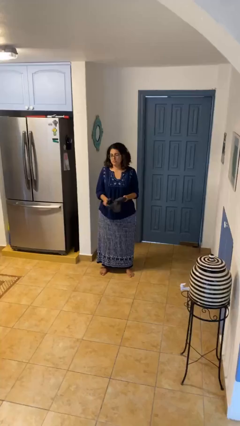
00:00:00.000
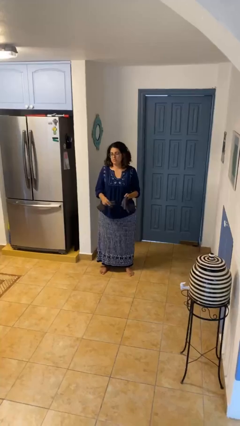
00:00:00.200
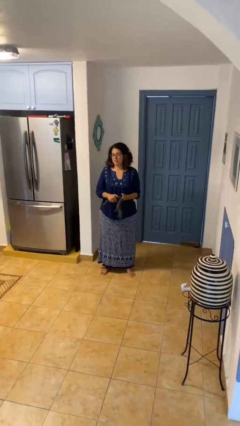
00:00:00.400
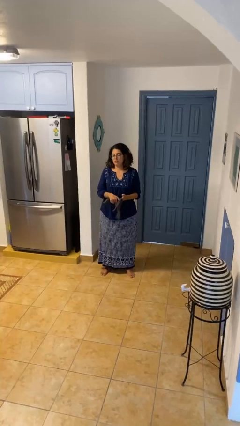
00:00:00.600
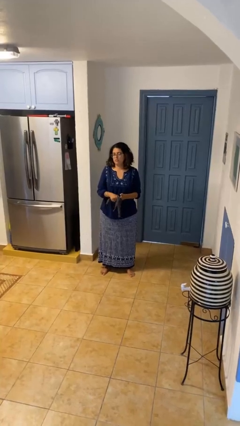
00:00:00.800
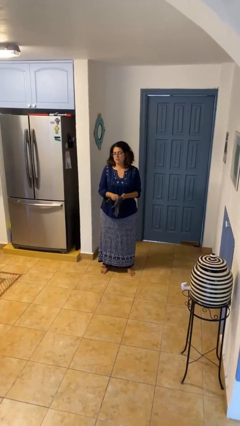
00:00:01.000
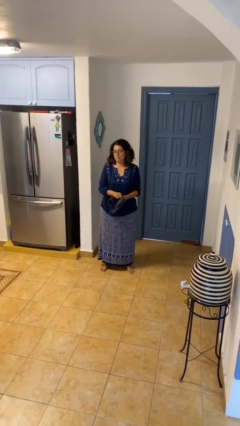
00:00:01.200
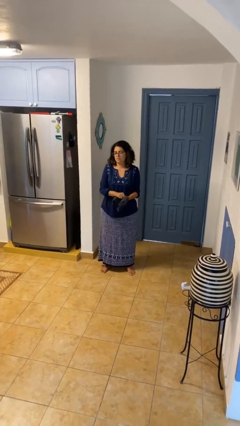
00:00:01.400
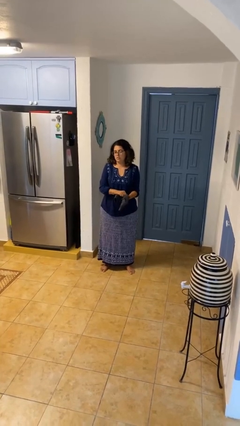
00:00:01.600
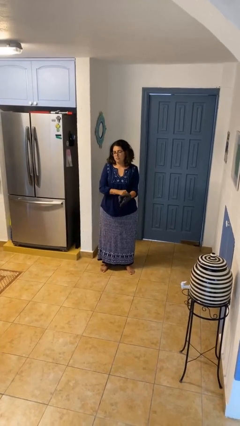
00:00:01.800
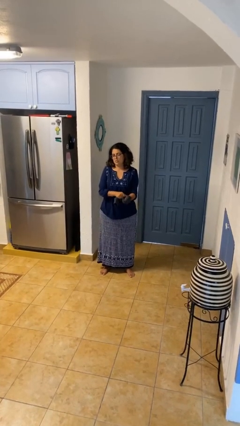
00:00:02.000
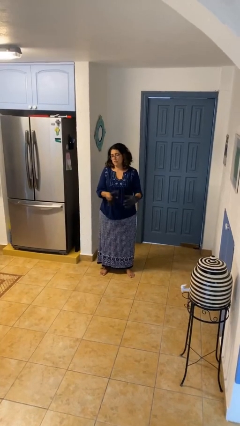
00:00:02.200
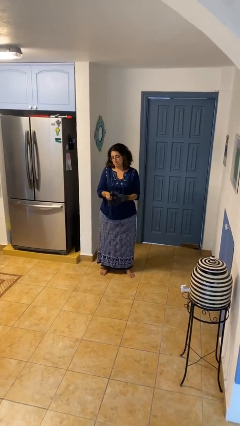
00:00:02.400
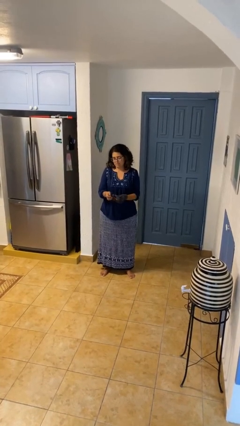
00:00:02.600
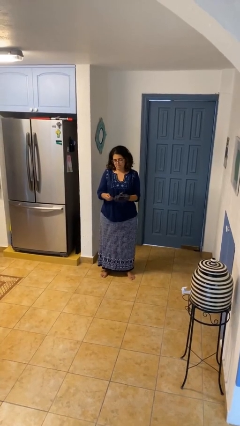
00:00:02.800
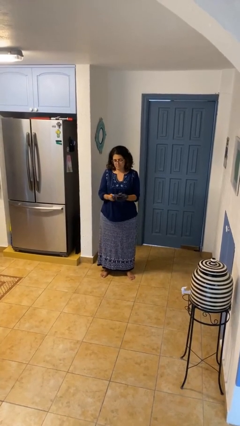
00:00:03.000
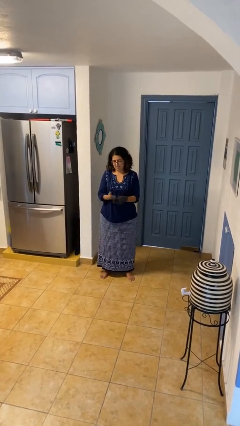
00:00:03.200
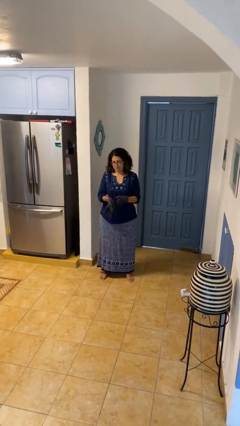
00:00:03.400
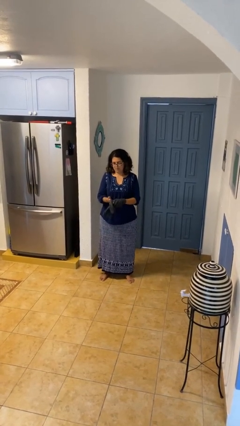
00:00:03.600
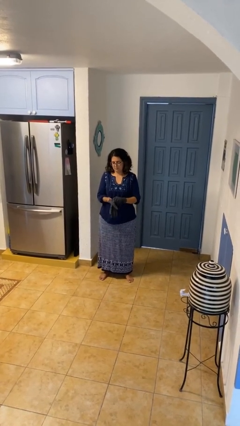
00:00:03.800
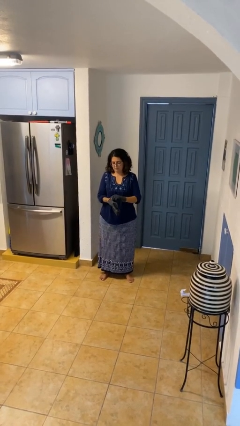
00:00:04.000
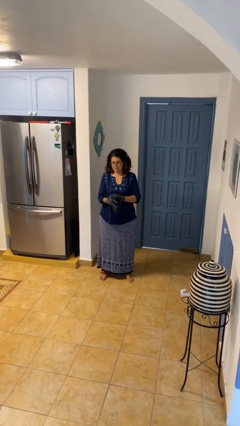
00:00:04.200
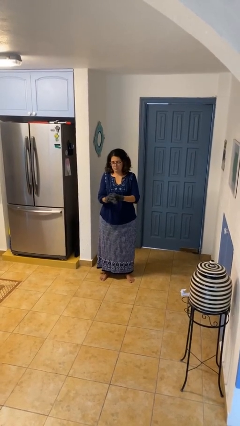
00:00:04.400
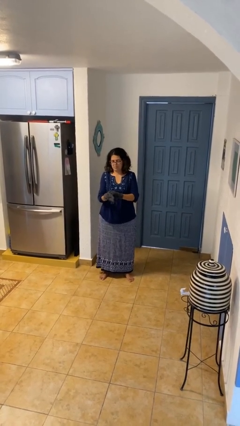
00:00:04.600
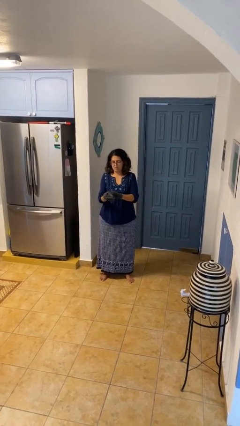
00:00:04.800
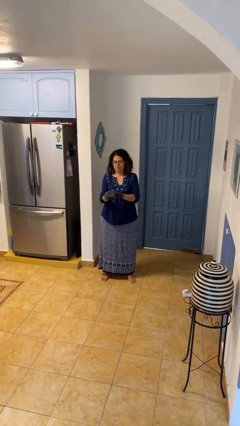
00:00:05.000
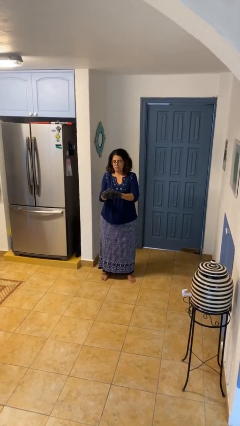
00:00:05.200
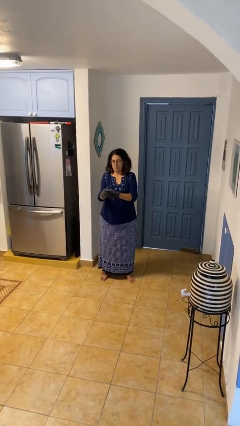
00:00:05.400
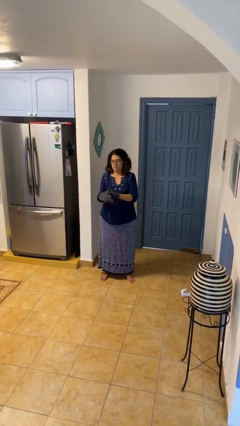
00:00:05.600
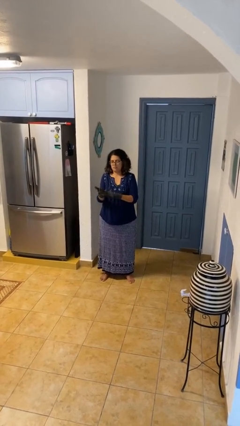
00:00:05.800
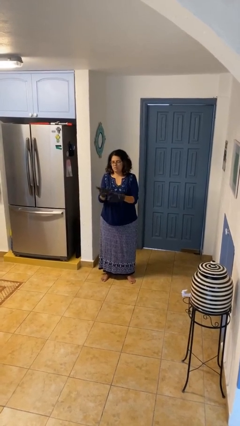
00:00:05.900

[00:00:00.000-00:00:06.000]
person puts on gloves

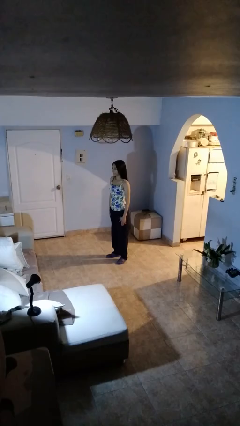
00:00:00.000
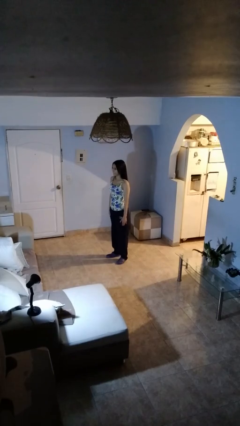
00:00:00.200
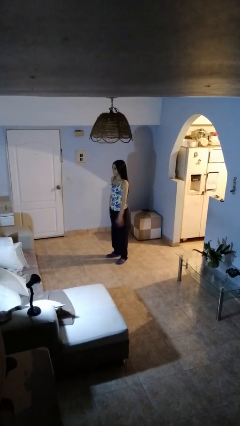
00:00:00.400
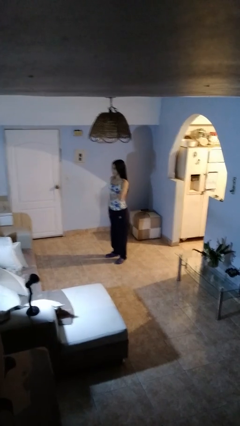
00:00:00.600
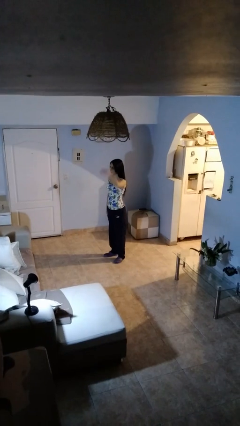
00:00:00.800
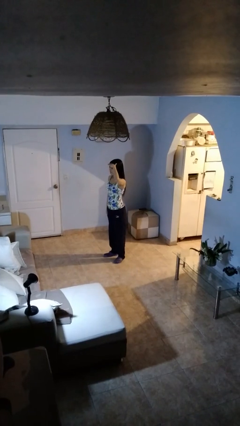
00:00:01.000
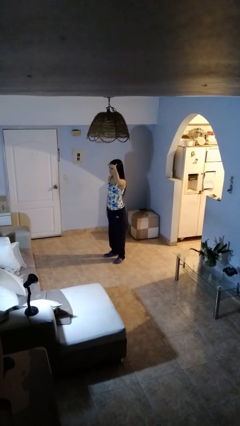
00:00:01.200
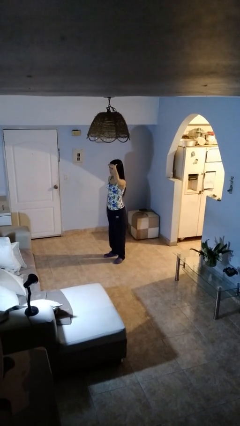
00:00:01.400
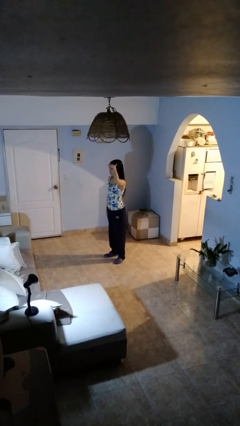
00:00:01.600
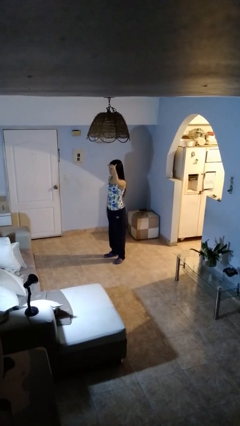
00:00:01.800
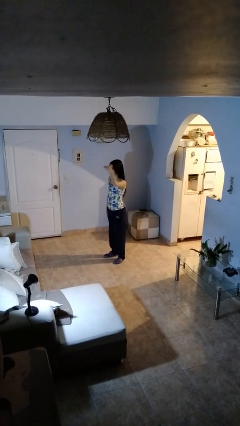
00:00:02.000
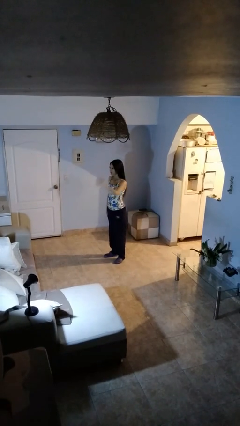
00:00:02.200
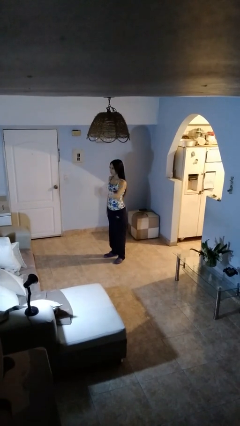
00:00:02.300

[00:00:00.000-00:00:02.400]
person salutes

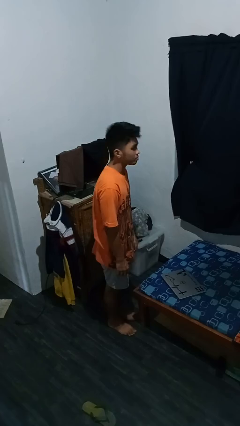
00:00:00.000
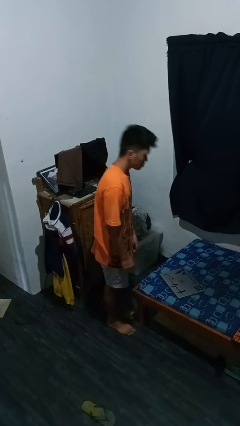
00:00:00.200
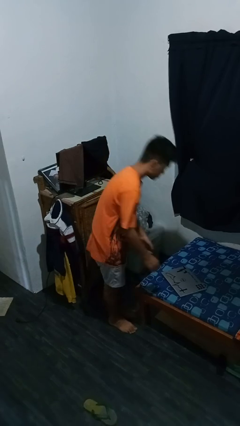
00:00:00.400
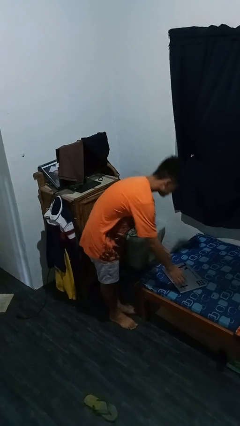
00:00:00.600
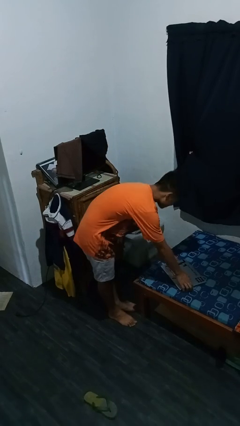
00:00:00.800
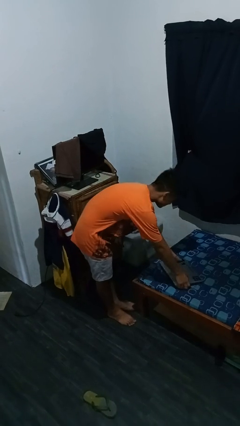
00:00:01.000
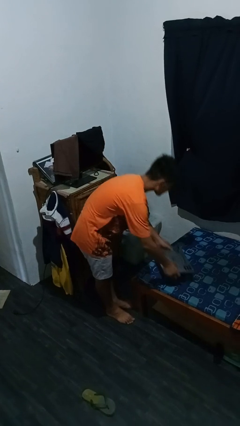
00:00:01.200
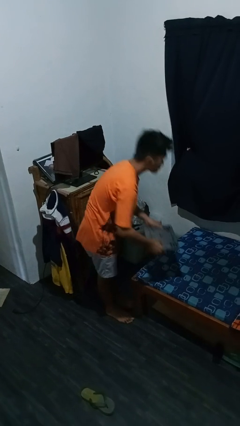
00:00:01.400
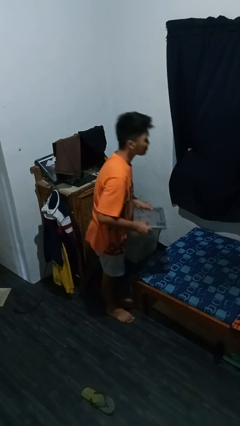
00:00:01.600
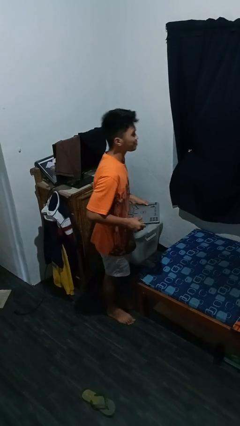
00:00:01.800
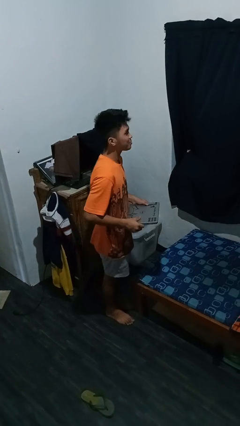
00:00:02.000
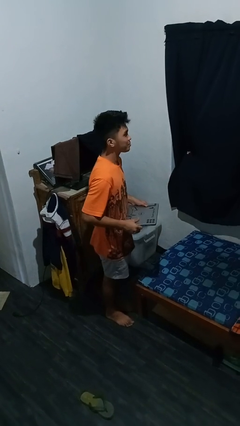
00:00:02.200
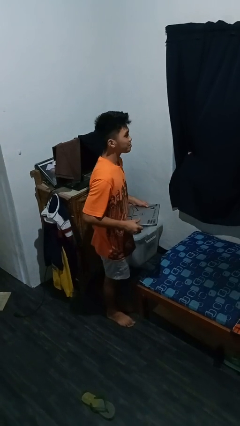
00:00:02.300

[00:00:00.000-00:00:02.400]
person picks up object from bed

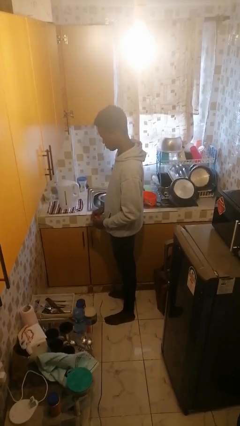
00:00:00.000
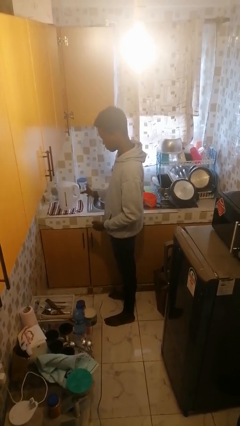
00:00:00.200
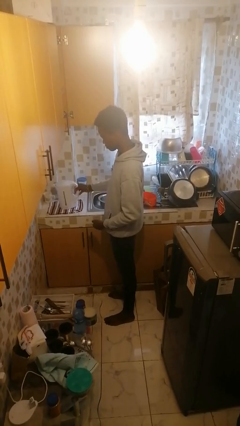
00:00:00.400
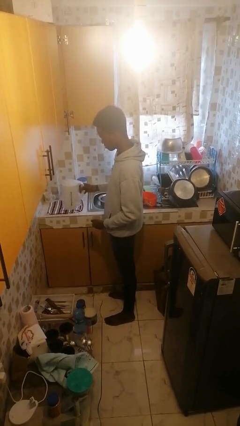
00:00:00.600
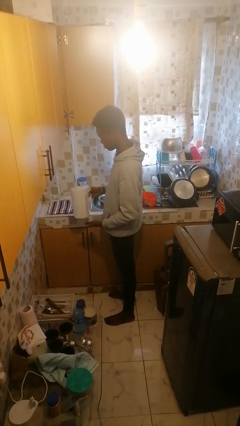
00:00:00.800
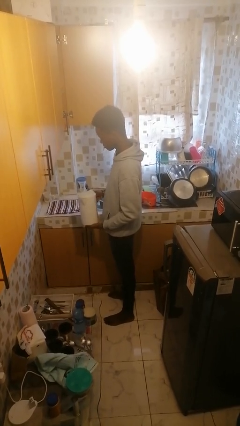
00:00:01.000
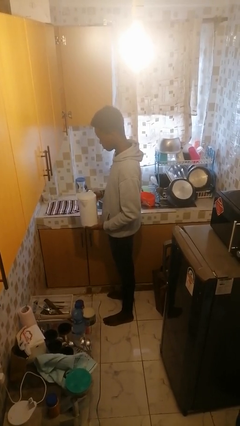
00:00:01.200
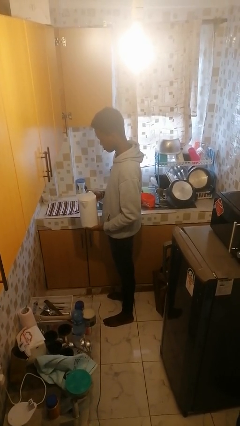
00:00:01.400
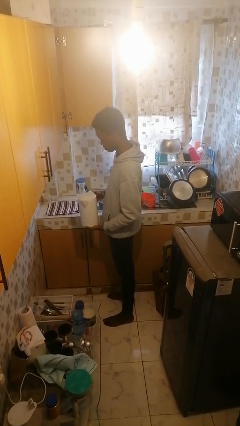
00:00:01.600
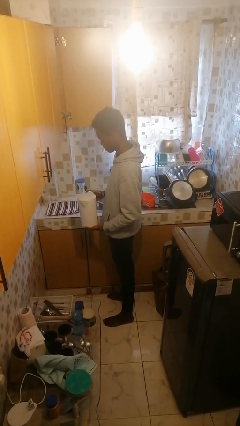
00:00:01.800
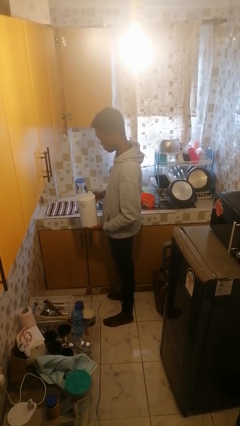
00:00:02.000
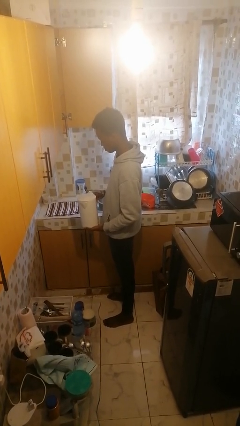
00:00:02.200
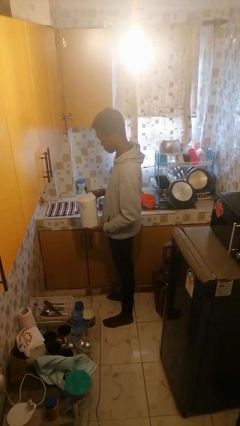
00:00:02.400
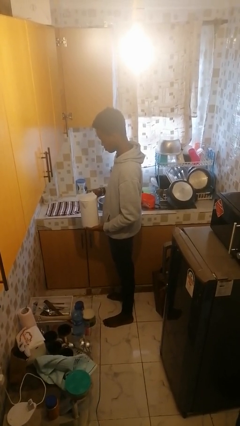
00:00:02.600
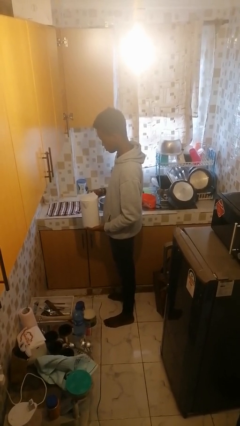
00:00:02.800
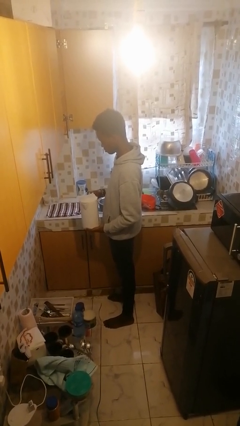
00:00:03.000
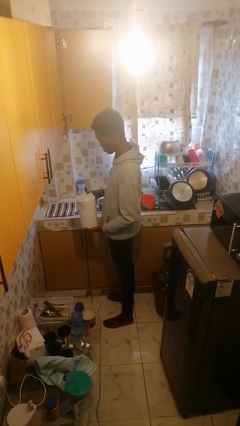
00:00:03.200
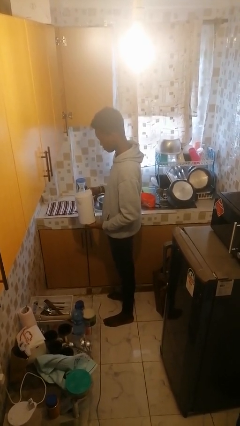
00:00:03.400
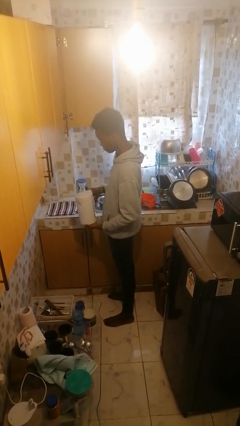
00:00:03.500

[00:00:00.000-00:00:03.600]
person picks up object from countertop

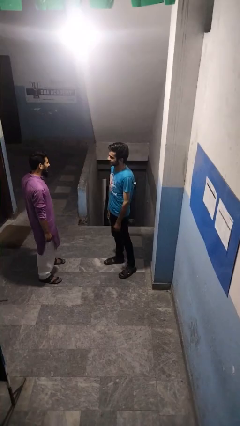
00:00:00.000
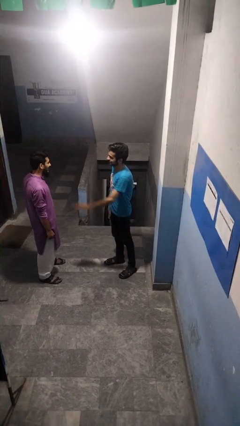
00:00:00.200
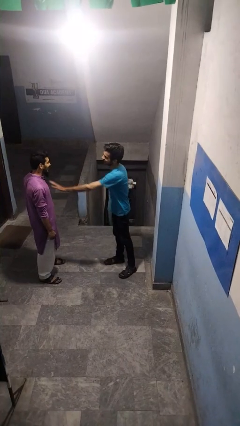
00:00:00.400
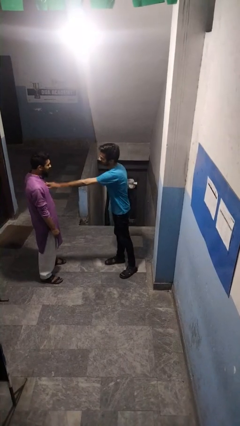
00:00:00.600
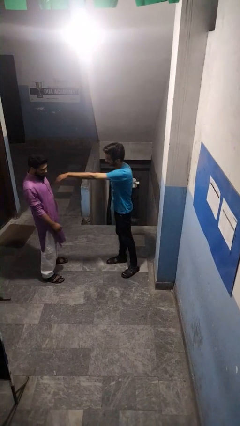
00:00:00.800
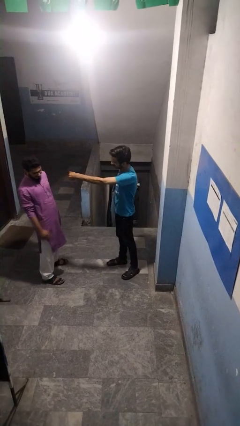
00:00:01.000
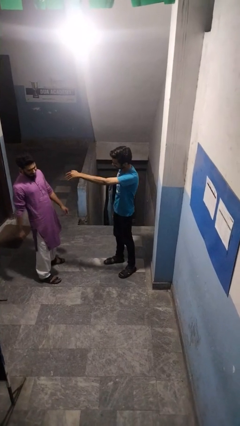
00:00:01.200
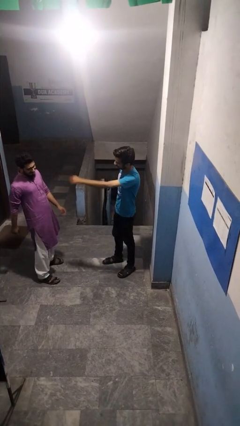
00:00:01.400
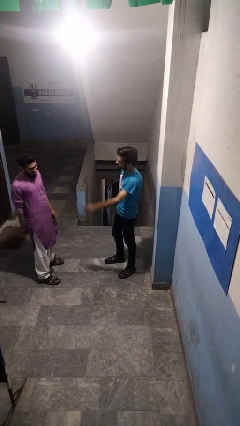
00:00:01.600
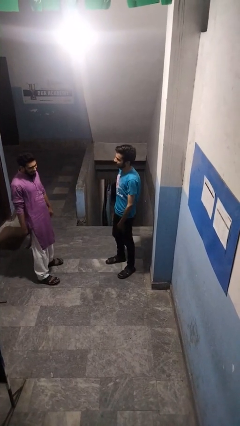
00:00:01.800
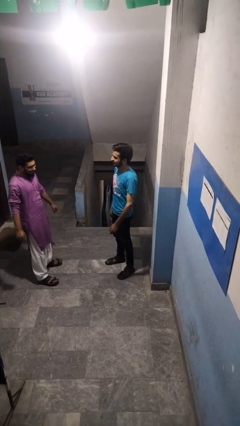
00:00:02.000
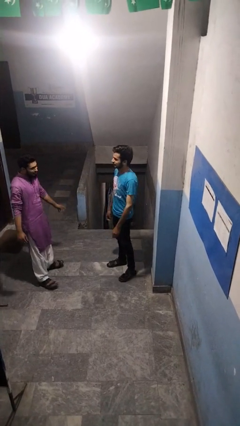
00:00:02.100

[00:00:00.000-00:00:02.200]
person shoves person

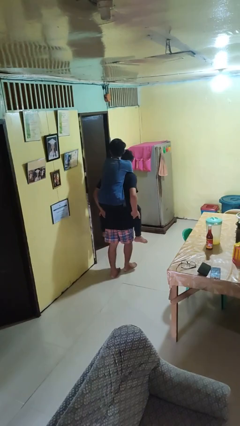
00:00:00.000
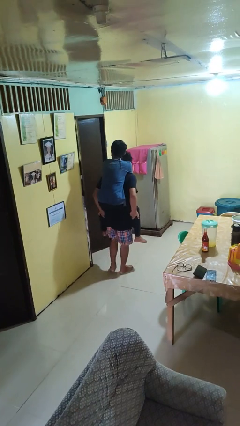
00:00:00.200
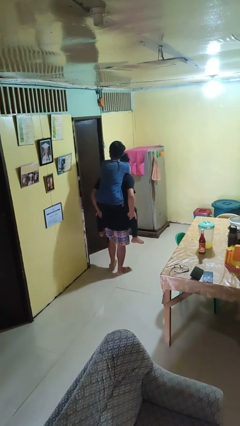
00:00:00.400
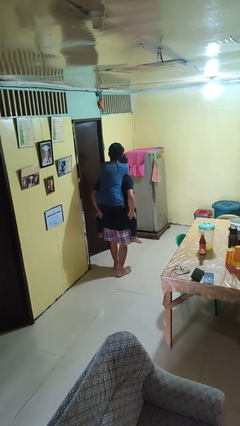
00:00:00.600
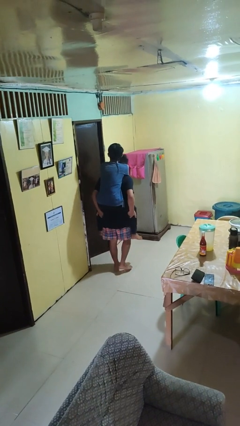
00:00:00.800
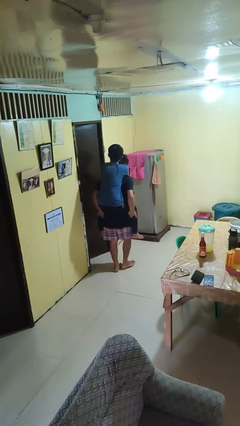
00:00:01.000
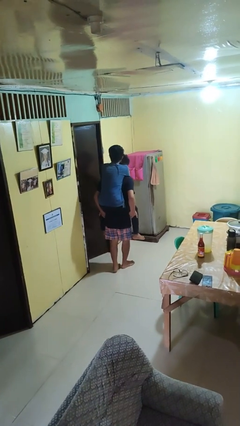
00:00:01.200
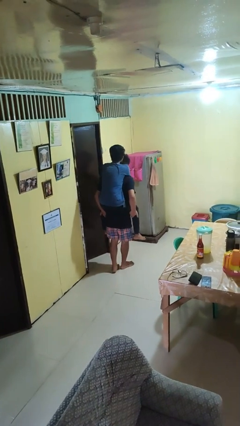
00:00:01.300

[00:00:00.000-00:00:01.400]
person carries person on back
